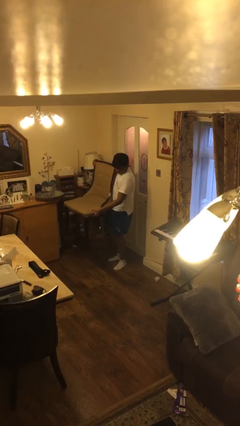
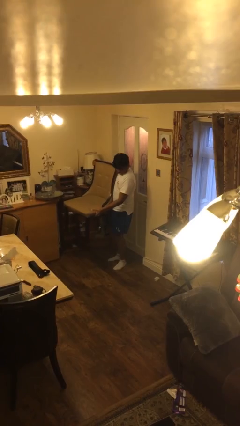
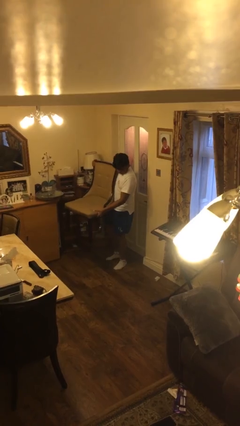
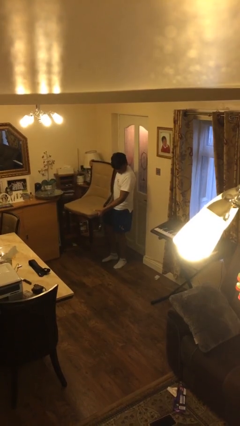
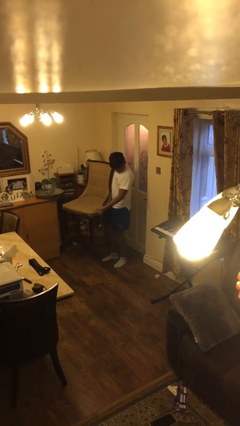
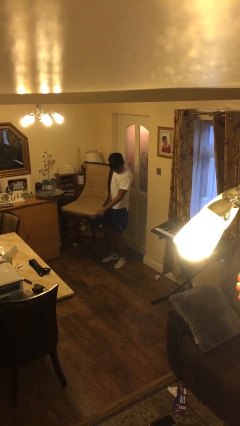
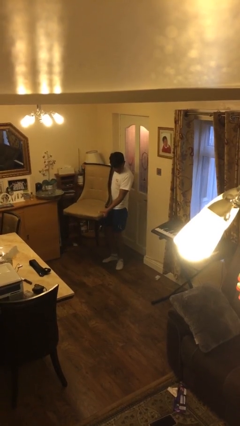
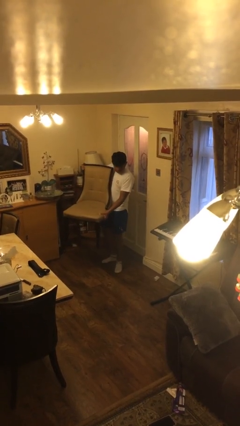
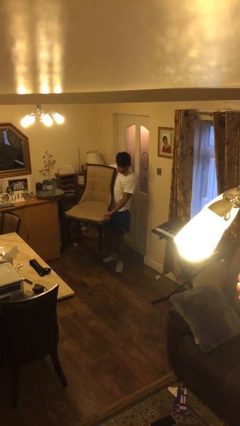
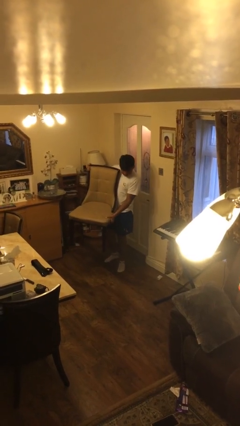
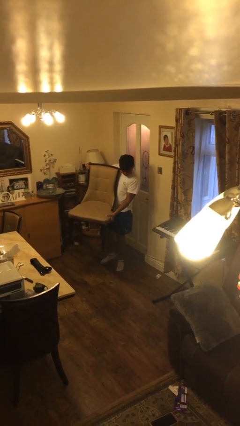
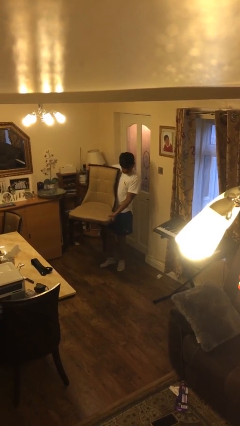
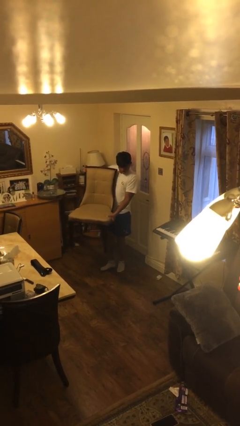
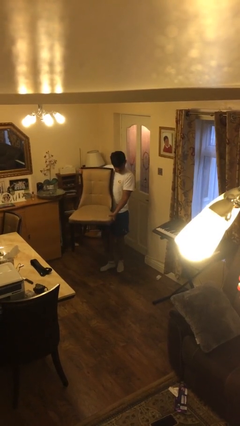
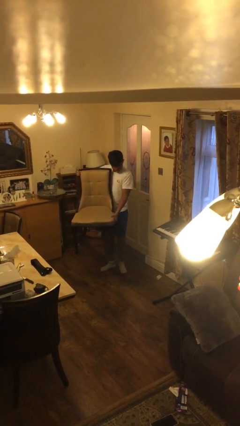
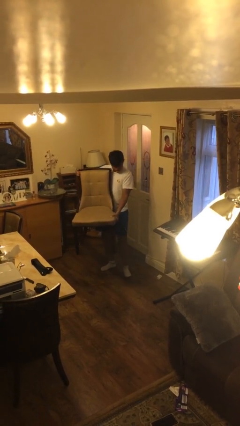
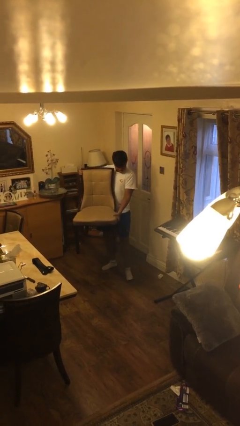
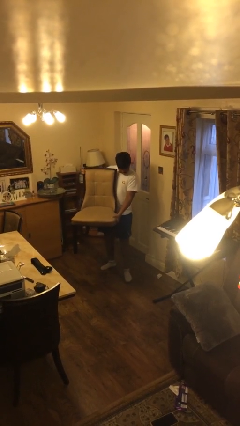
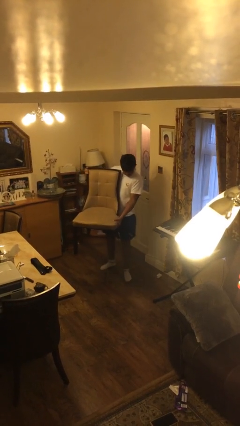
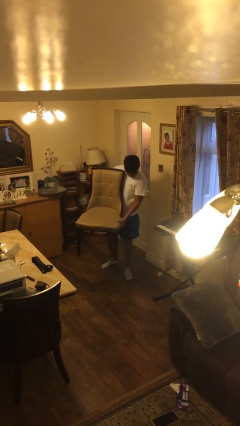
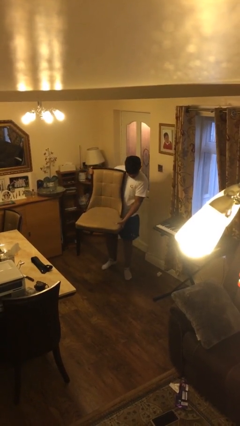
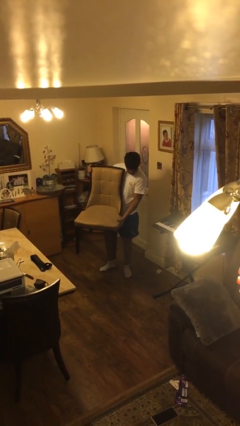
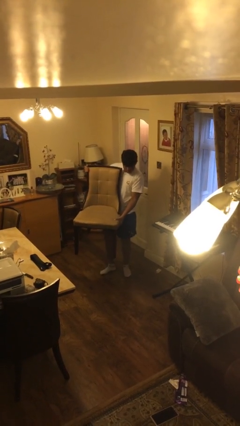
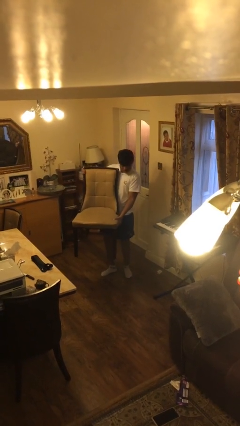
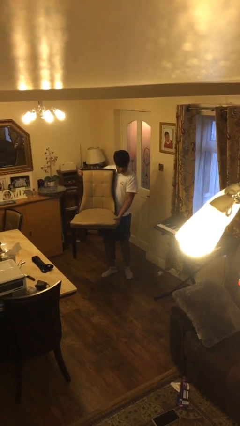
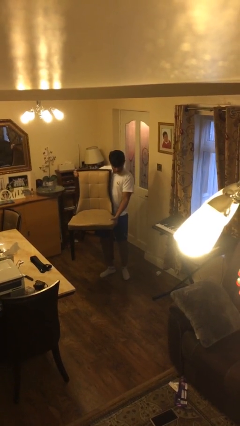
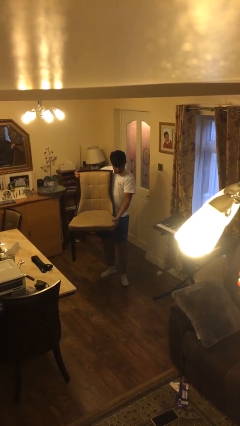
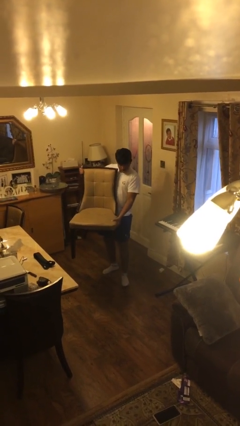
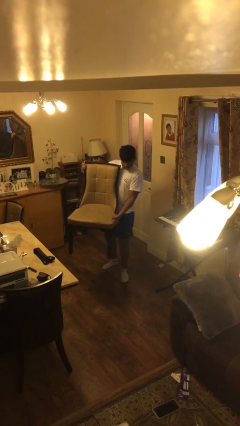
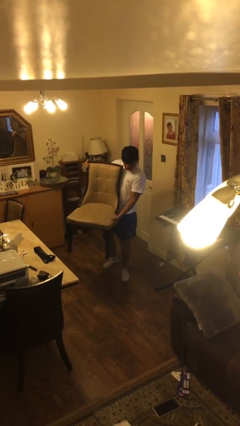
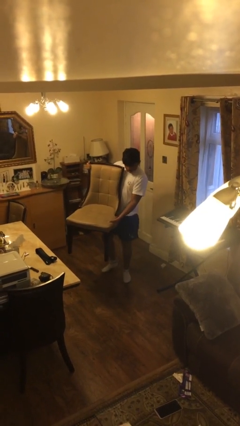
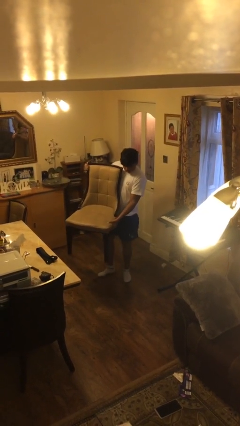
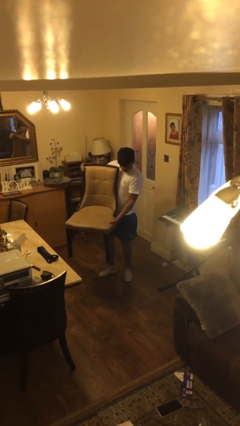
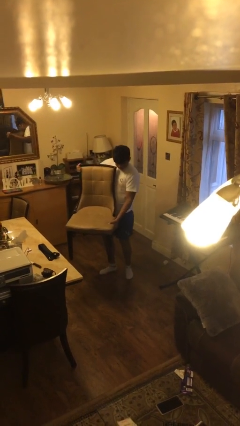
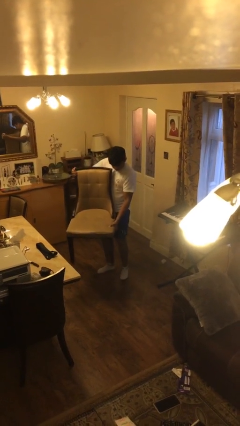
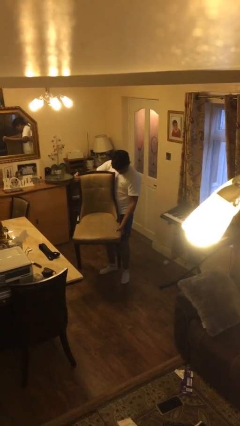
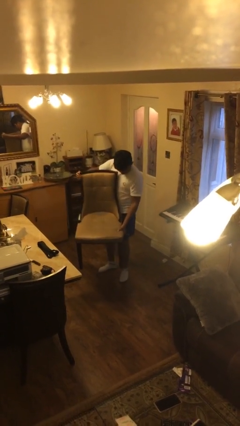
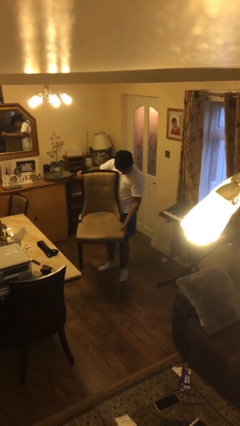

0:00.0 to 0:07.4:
person carries heavy object

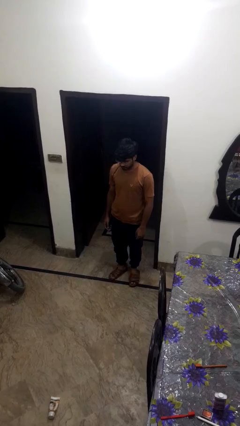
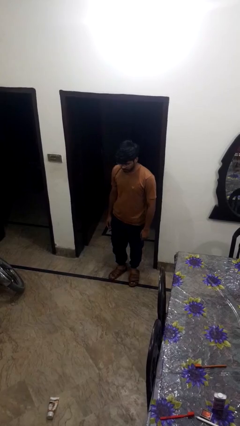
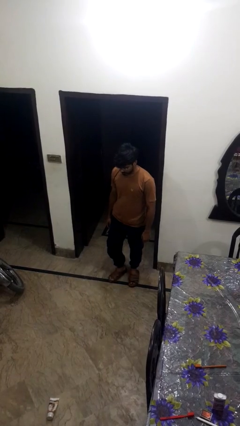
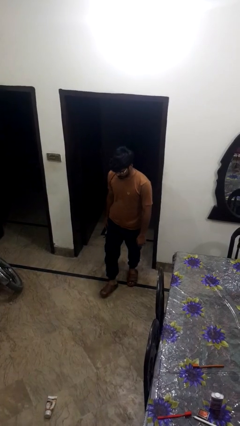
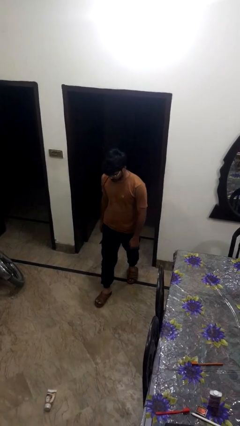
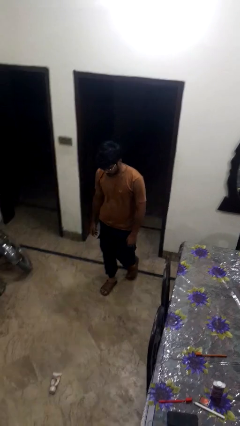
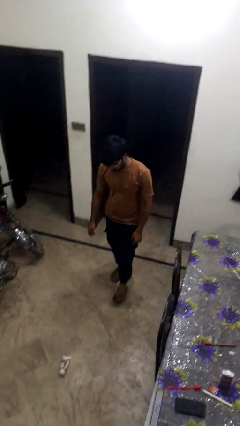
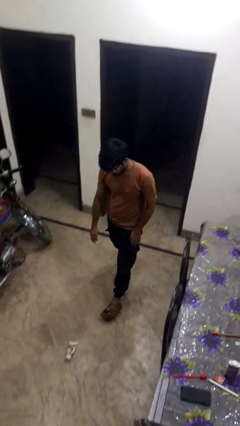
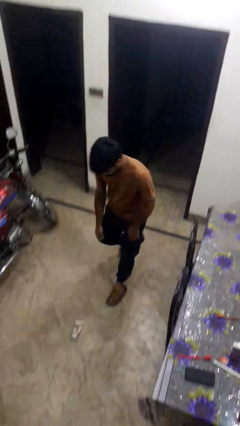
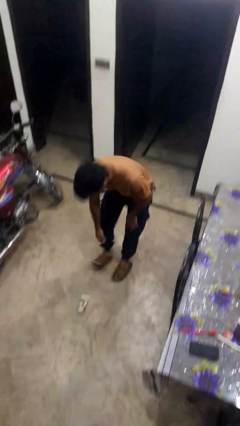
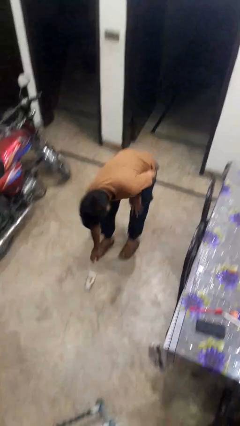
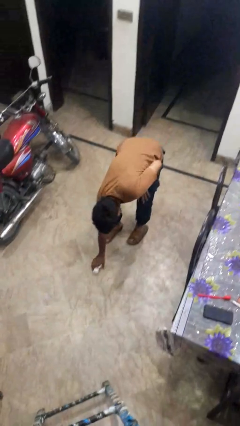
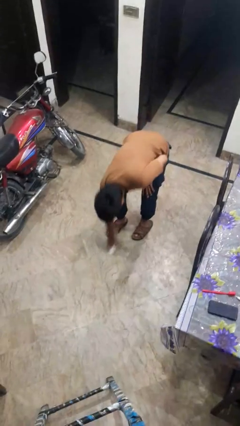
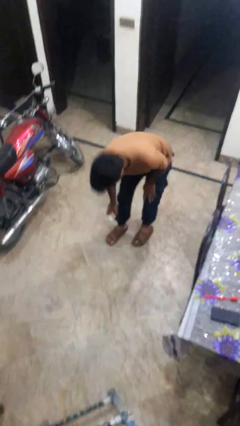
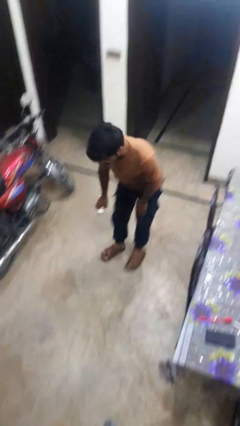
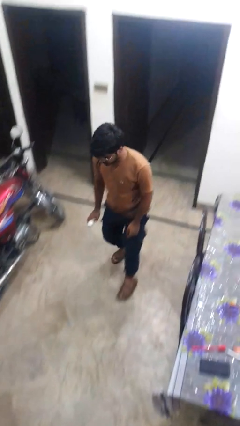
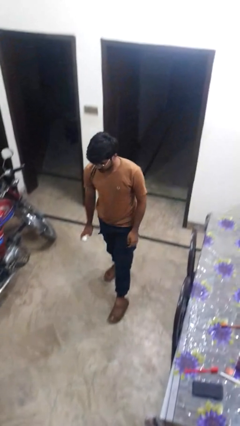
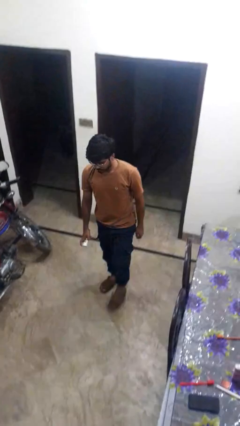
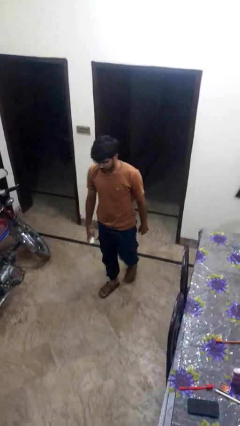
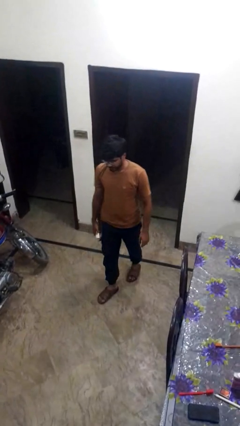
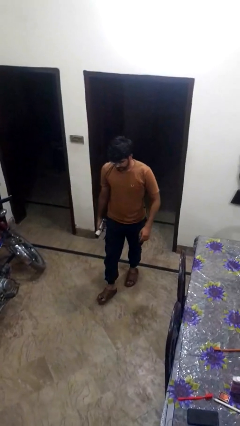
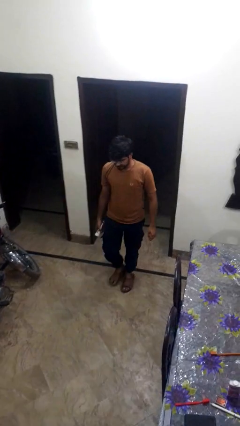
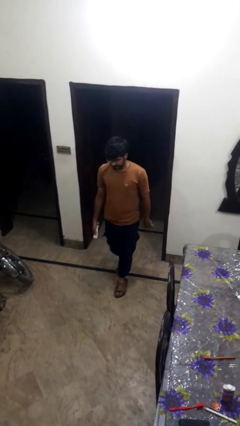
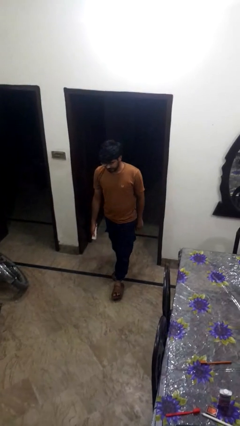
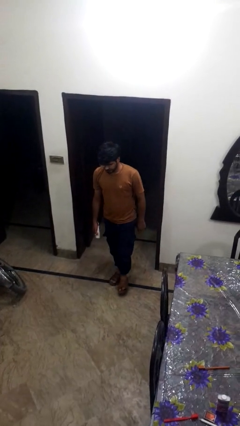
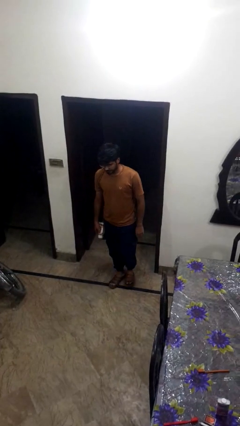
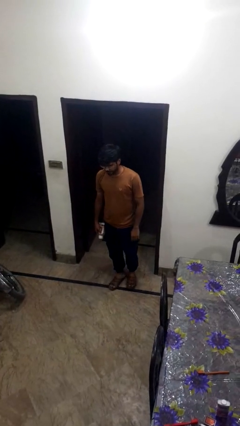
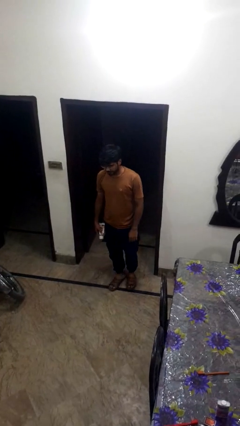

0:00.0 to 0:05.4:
person picks up object from floor

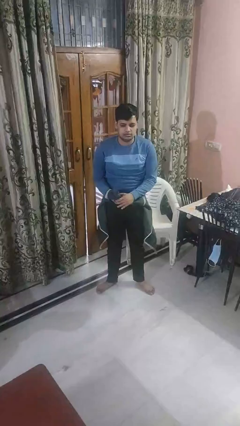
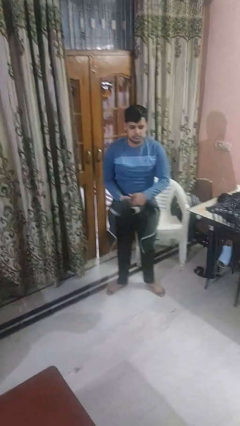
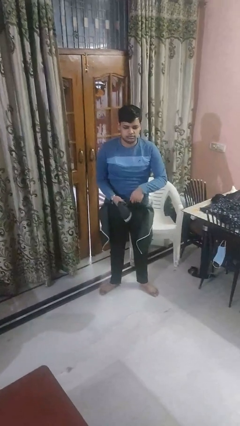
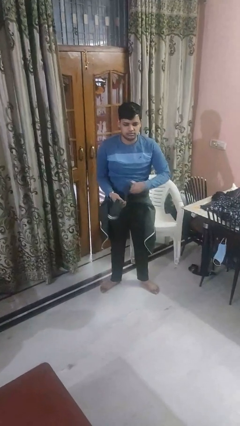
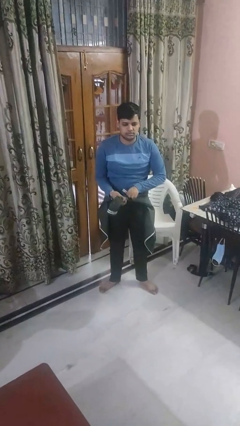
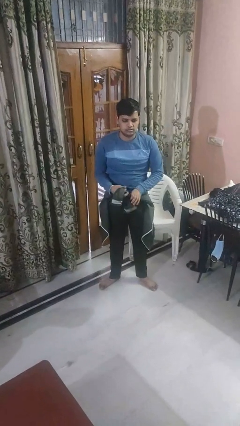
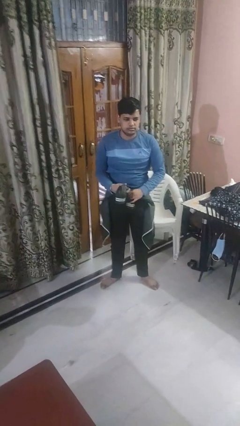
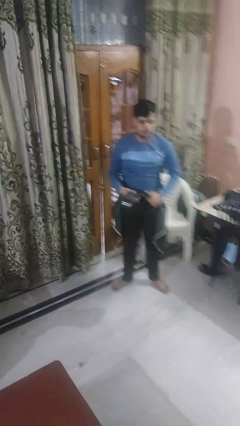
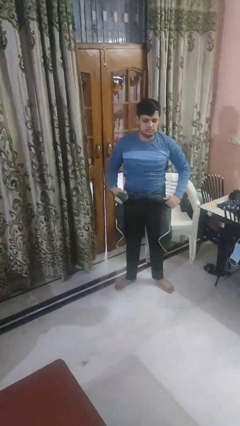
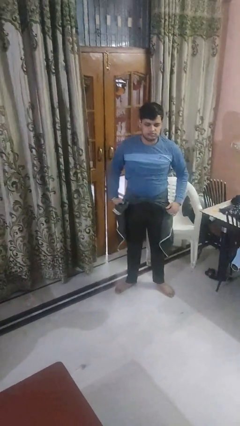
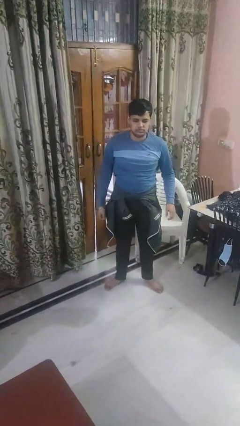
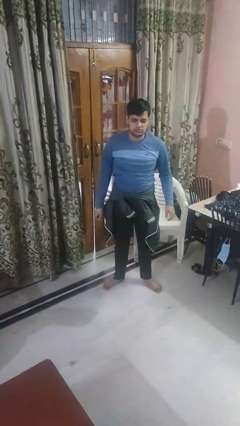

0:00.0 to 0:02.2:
person ties jacket around waist

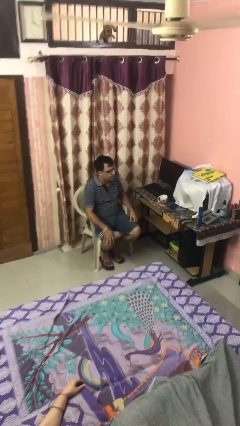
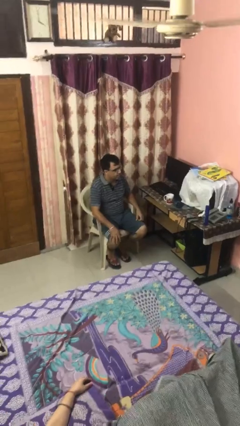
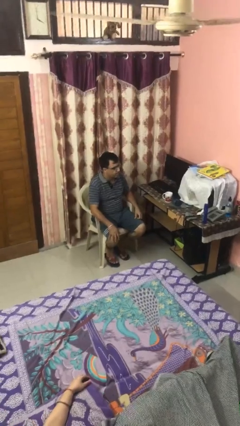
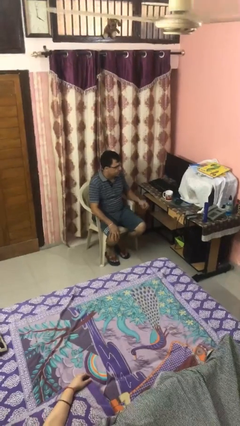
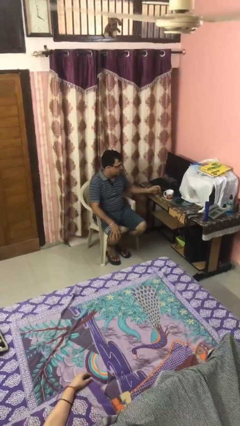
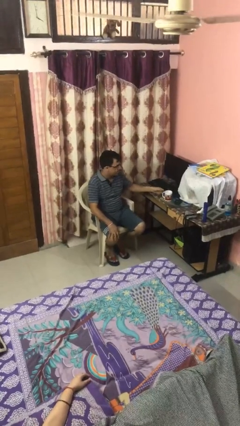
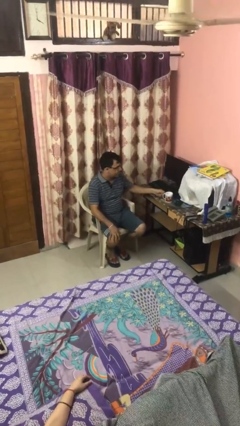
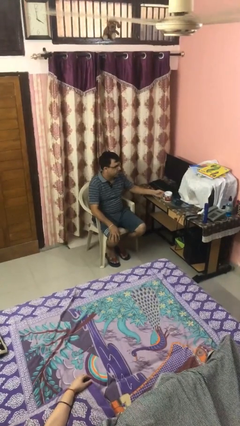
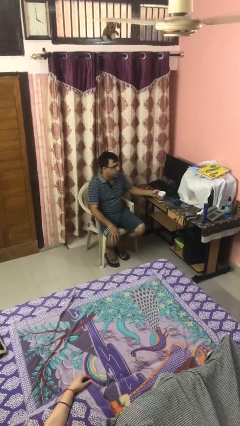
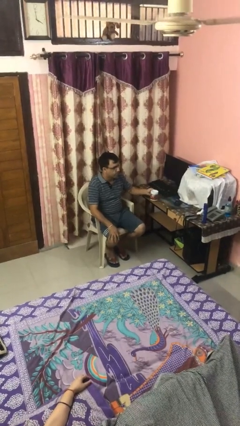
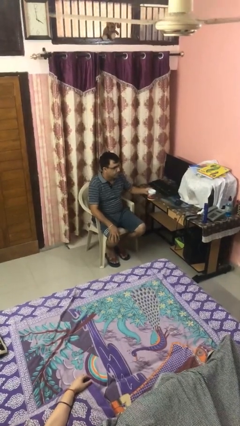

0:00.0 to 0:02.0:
person picks up object from table

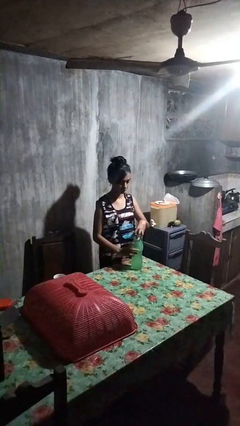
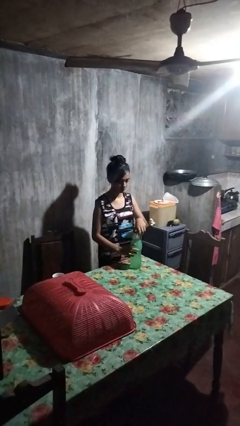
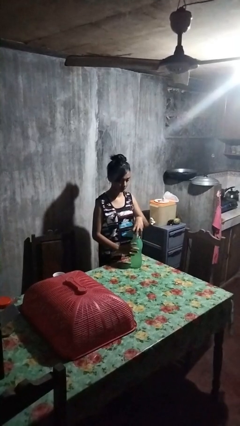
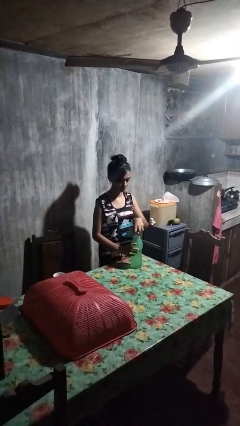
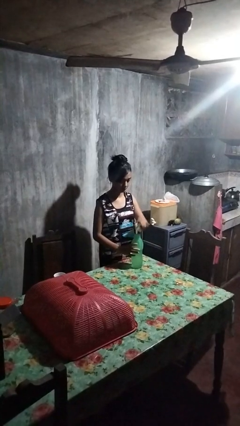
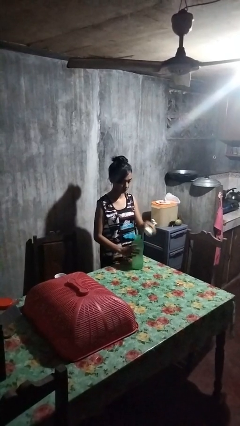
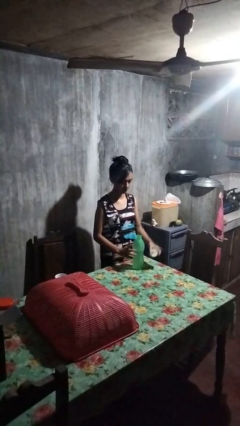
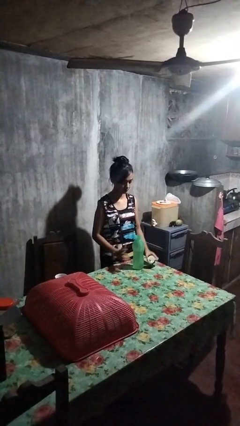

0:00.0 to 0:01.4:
person unscrews lid from bottle
